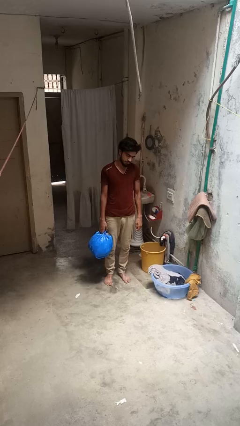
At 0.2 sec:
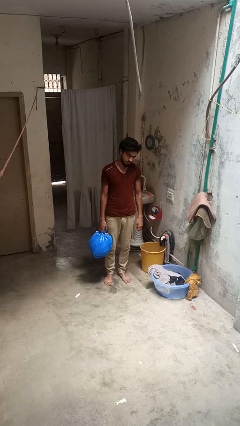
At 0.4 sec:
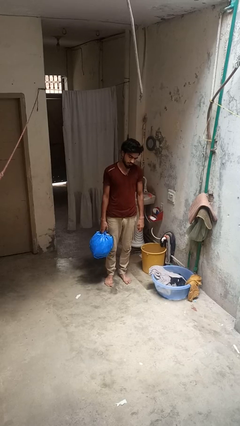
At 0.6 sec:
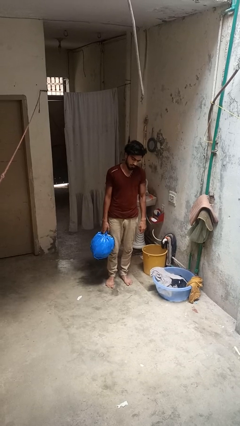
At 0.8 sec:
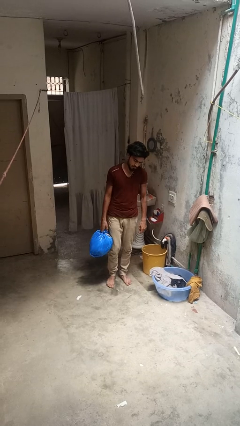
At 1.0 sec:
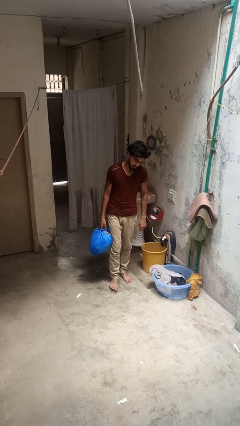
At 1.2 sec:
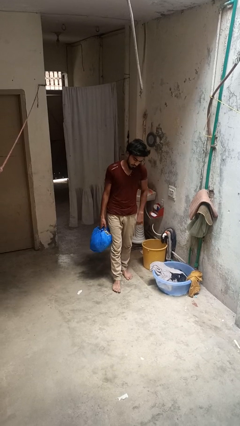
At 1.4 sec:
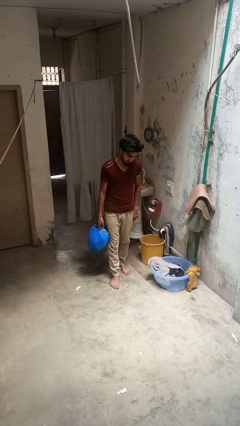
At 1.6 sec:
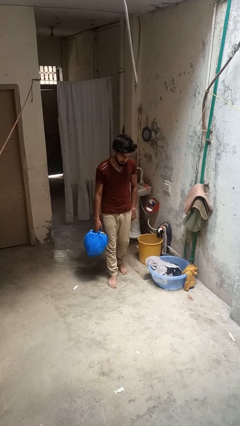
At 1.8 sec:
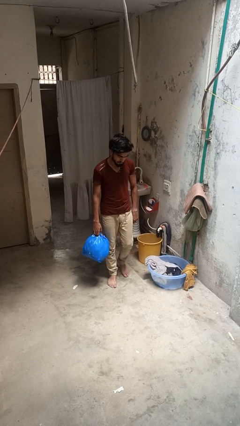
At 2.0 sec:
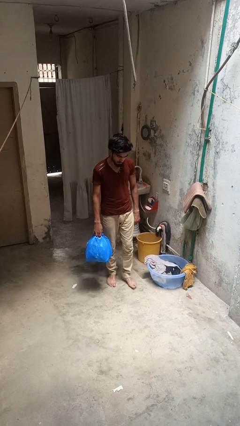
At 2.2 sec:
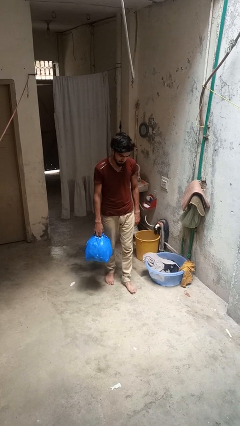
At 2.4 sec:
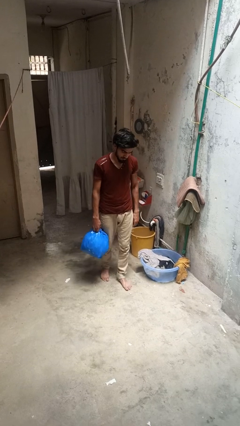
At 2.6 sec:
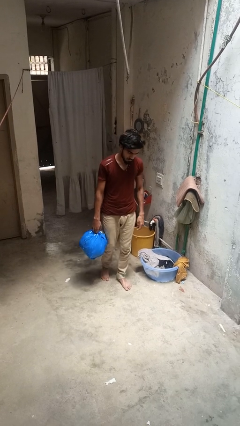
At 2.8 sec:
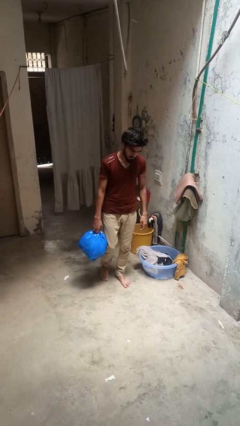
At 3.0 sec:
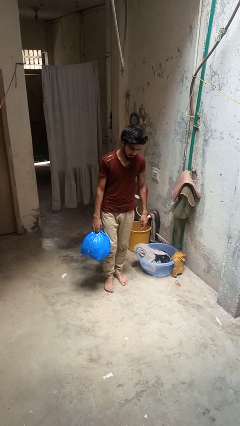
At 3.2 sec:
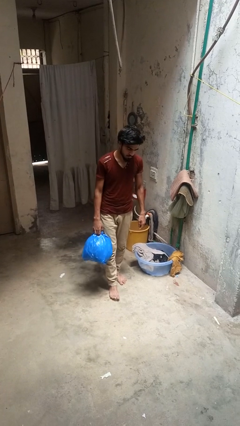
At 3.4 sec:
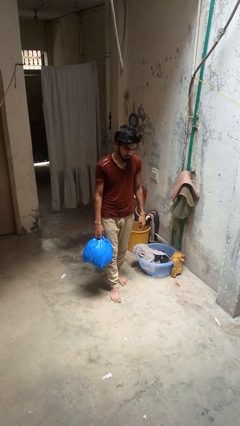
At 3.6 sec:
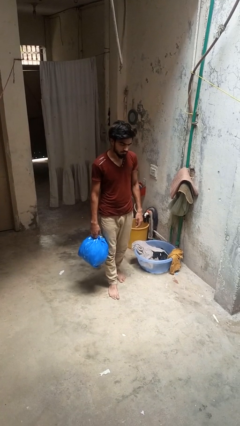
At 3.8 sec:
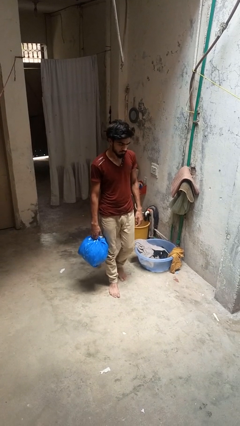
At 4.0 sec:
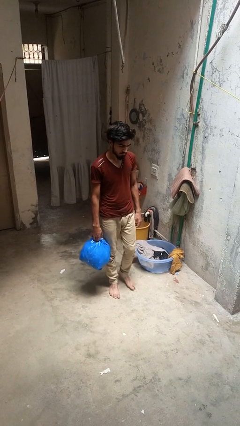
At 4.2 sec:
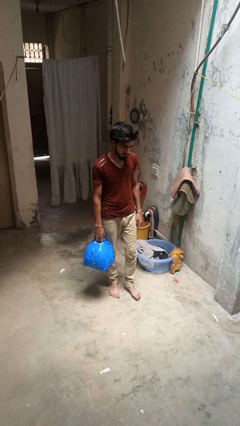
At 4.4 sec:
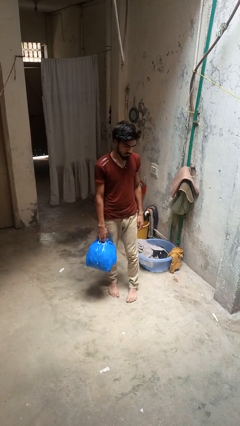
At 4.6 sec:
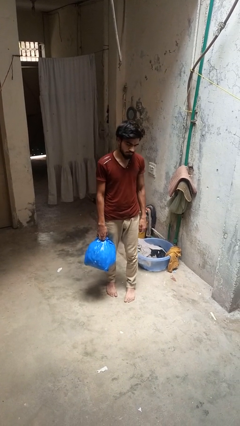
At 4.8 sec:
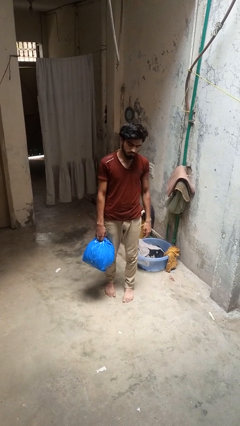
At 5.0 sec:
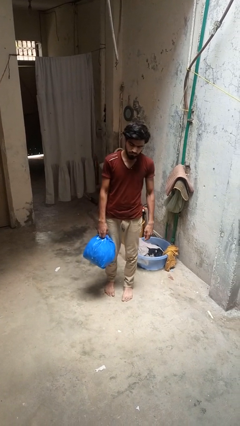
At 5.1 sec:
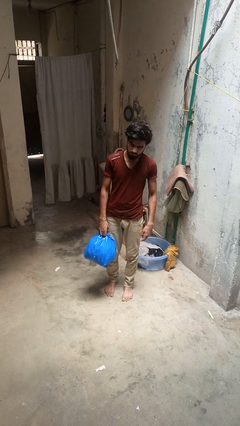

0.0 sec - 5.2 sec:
person carries groceries

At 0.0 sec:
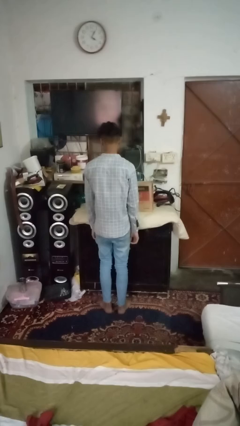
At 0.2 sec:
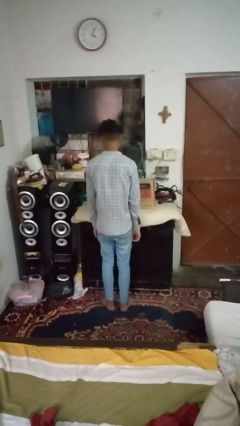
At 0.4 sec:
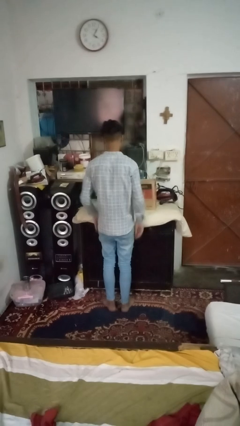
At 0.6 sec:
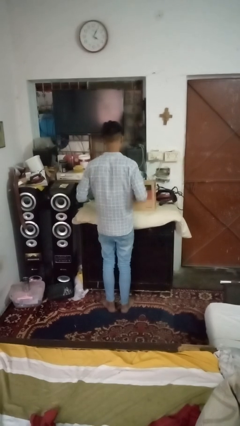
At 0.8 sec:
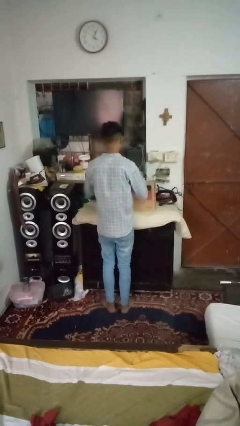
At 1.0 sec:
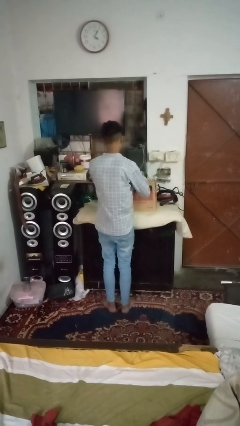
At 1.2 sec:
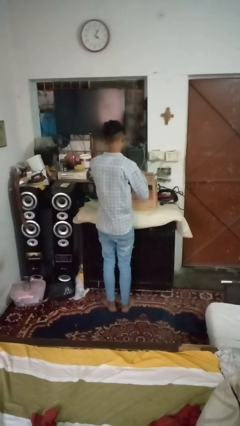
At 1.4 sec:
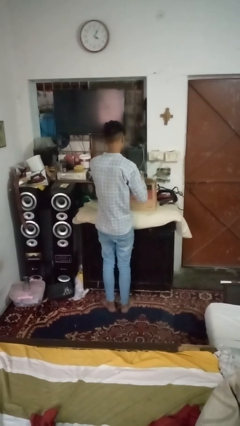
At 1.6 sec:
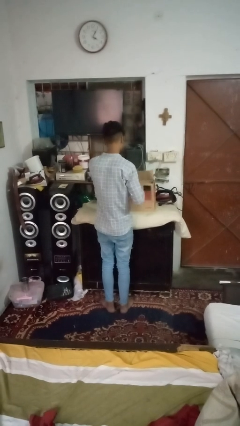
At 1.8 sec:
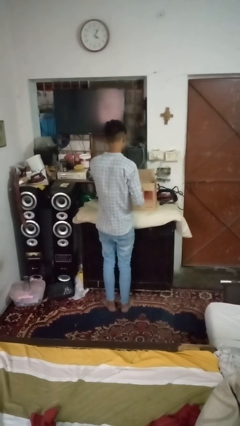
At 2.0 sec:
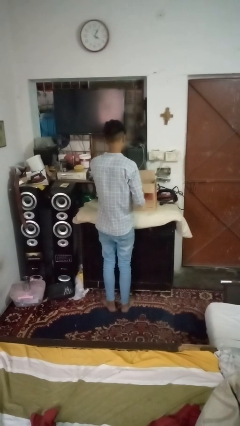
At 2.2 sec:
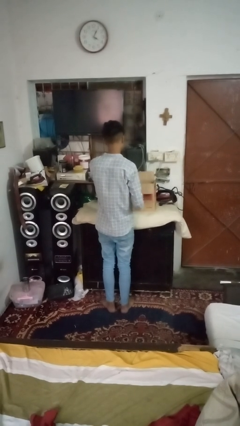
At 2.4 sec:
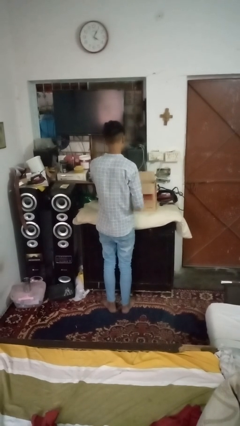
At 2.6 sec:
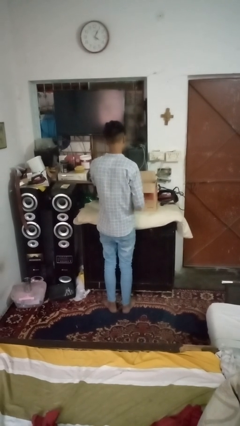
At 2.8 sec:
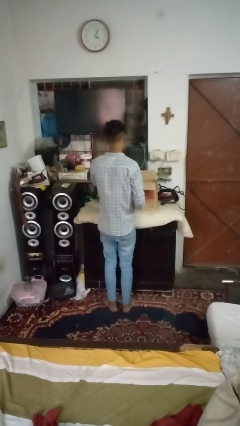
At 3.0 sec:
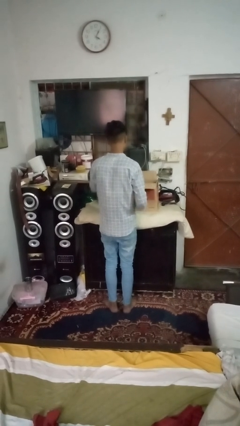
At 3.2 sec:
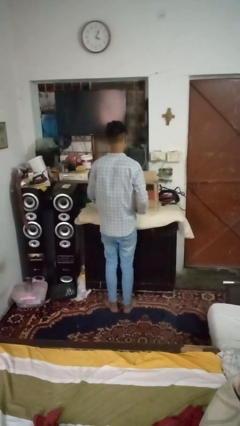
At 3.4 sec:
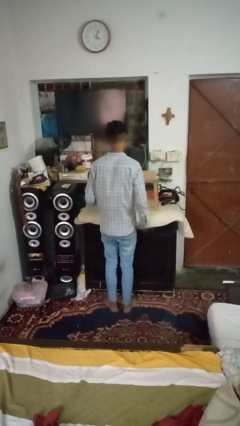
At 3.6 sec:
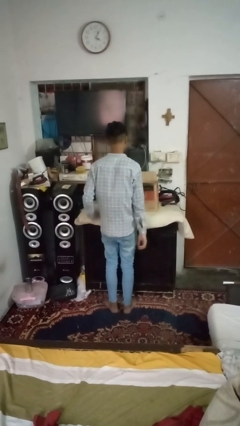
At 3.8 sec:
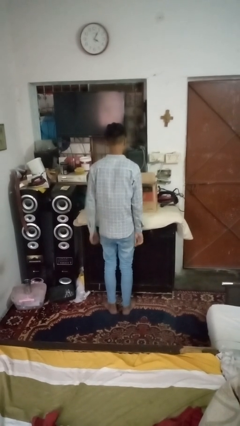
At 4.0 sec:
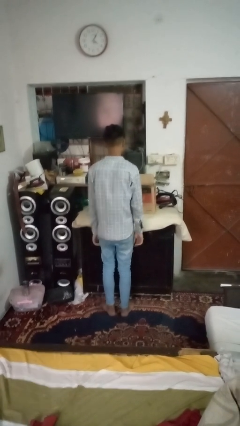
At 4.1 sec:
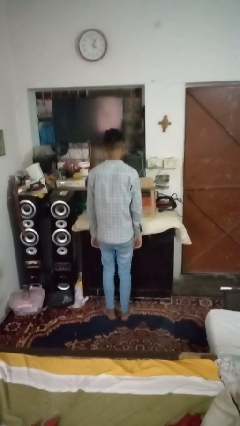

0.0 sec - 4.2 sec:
person opens box

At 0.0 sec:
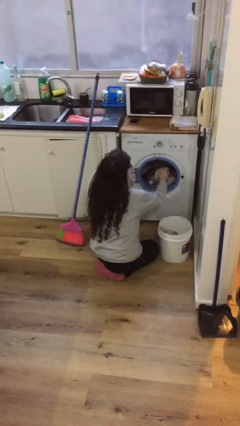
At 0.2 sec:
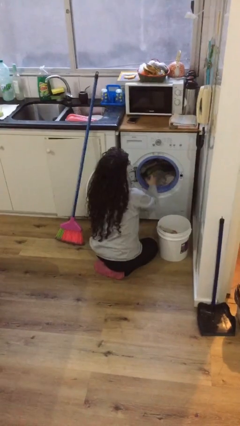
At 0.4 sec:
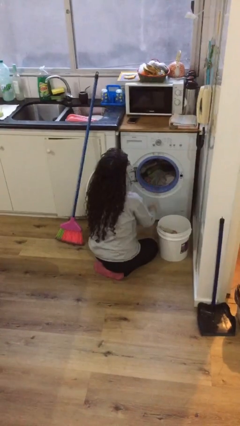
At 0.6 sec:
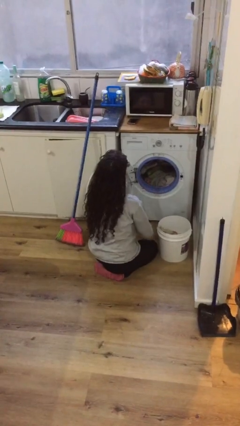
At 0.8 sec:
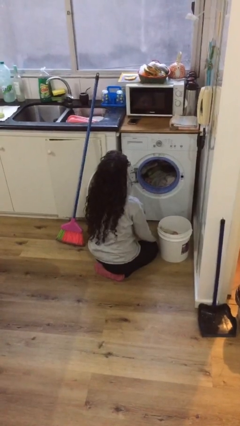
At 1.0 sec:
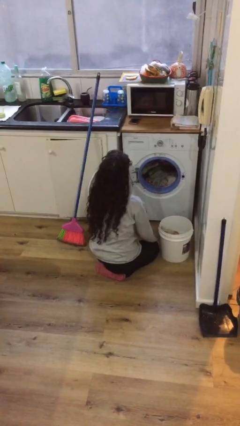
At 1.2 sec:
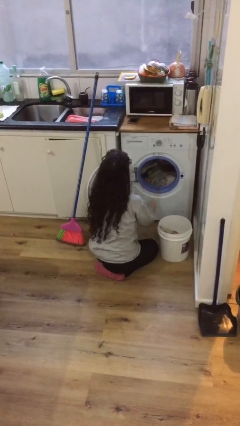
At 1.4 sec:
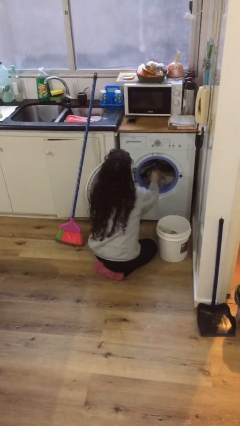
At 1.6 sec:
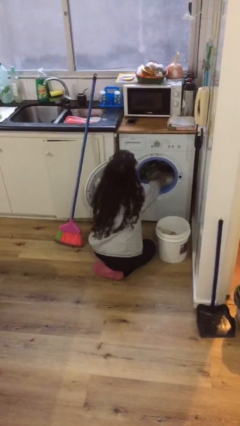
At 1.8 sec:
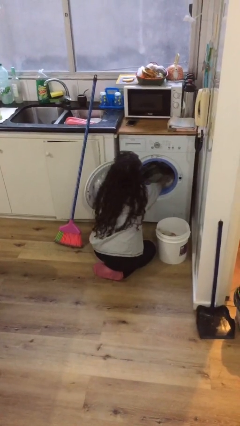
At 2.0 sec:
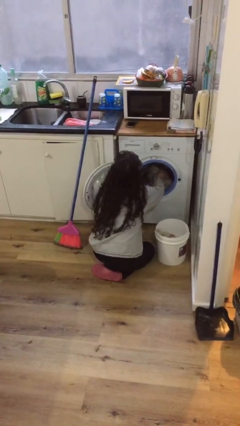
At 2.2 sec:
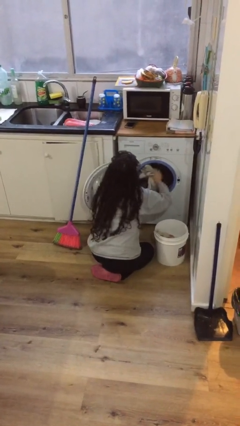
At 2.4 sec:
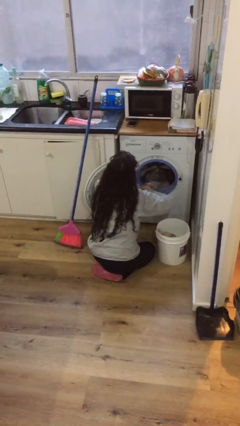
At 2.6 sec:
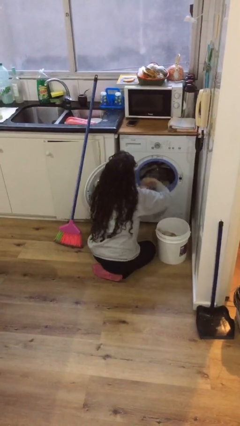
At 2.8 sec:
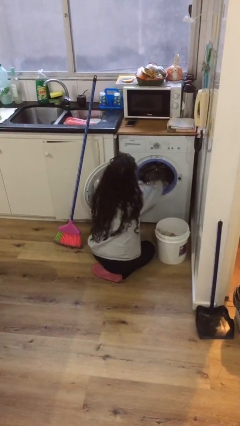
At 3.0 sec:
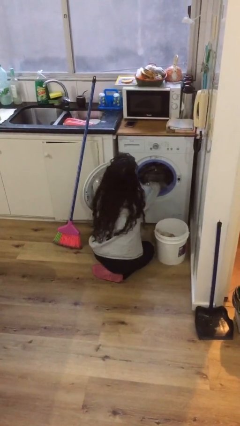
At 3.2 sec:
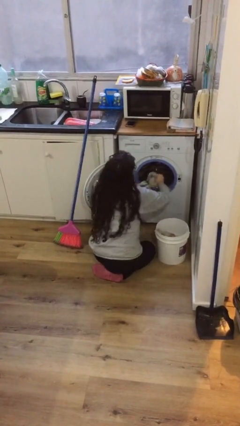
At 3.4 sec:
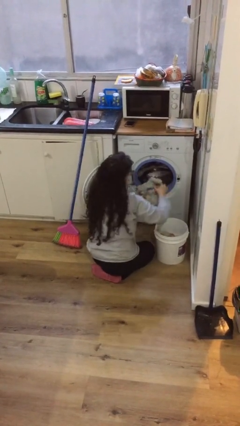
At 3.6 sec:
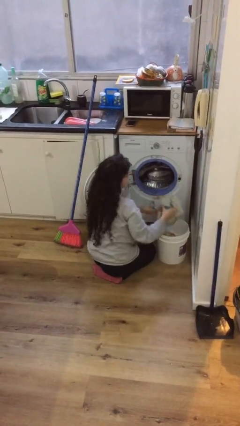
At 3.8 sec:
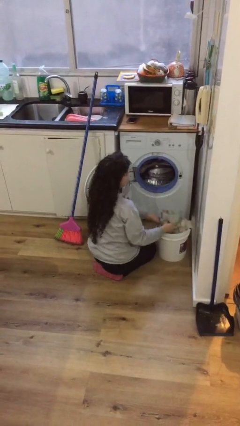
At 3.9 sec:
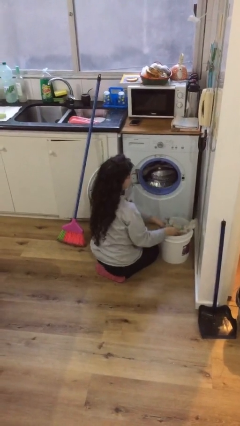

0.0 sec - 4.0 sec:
person unloads clotheswasher

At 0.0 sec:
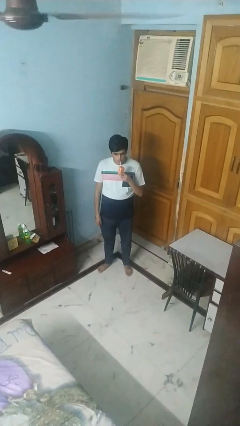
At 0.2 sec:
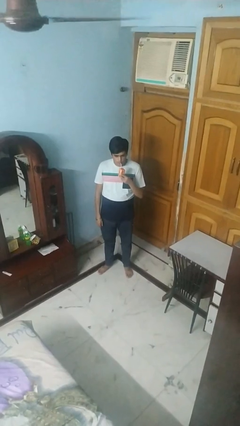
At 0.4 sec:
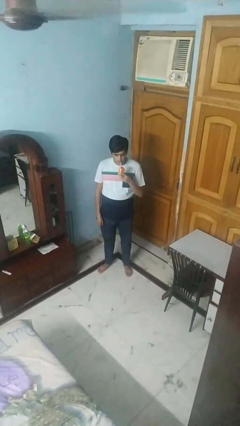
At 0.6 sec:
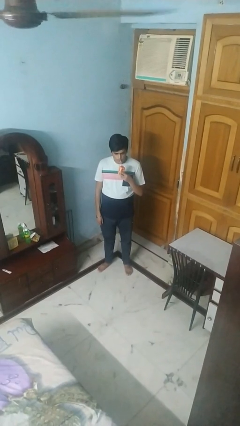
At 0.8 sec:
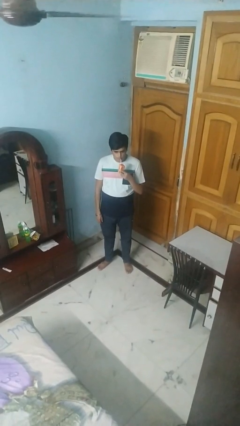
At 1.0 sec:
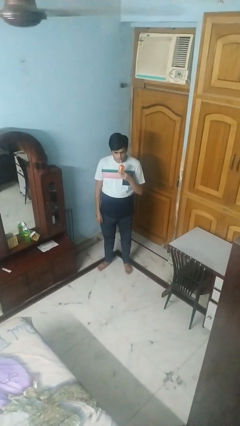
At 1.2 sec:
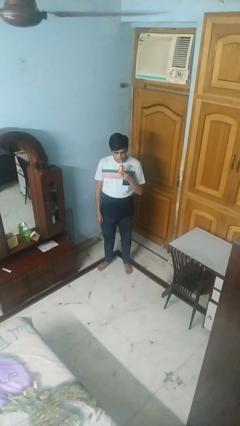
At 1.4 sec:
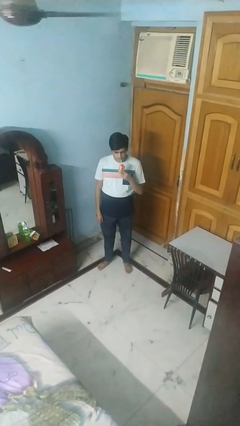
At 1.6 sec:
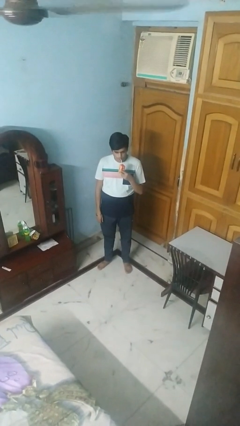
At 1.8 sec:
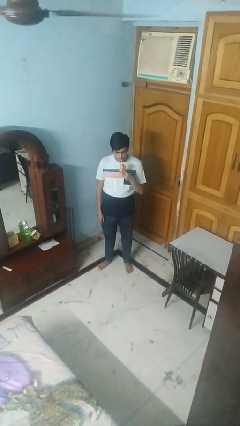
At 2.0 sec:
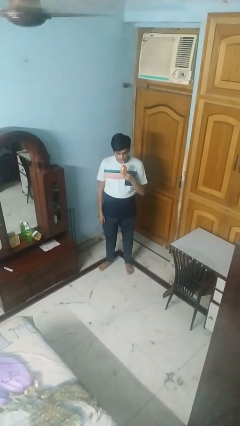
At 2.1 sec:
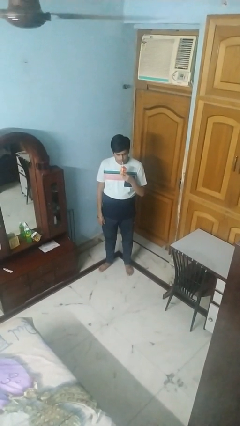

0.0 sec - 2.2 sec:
person drinks from straw

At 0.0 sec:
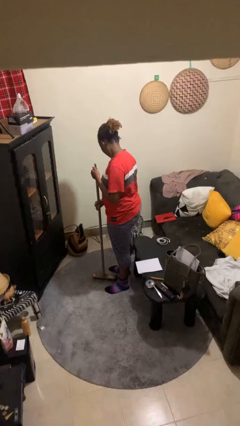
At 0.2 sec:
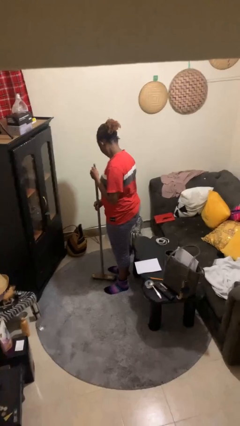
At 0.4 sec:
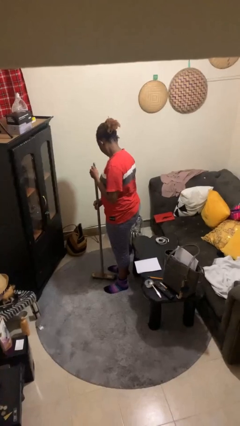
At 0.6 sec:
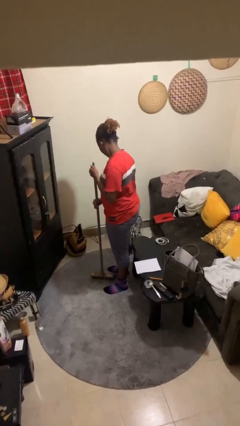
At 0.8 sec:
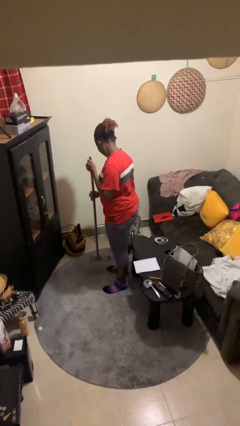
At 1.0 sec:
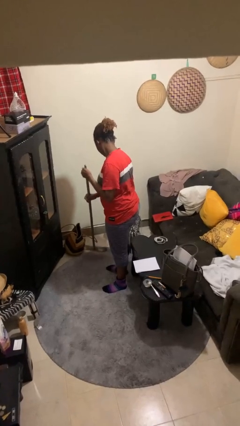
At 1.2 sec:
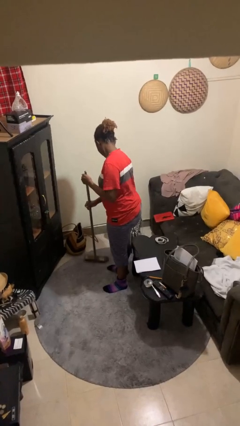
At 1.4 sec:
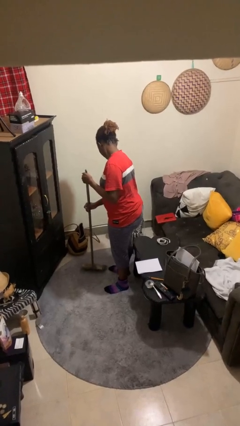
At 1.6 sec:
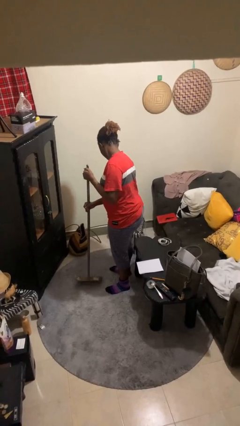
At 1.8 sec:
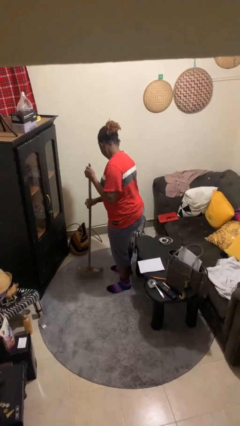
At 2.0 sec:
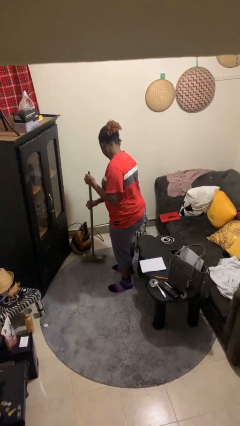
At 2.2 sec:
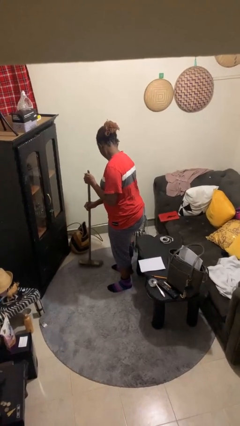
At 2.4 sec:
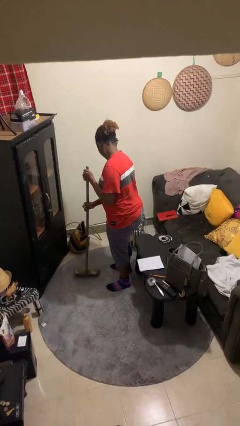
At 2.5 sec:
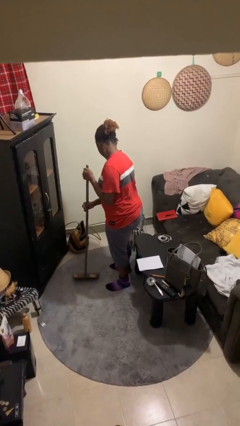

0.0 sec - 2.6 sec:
person sweeps floor
